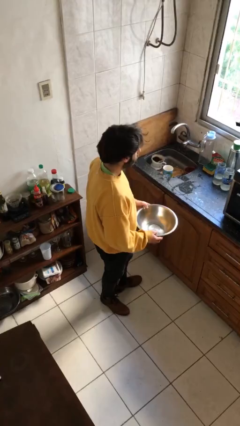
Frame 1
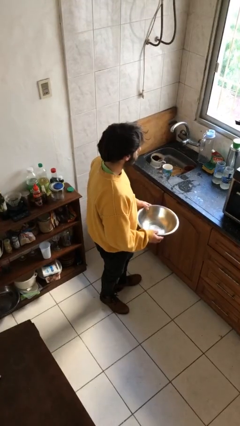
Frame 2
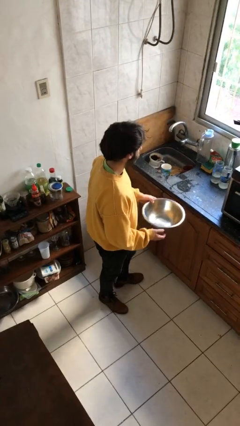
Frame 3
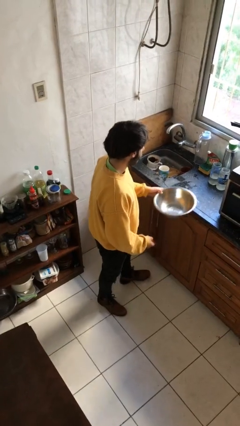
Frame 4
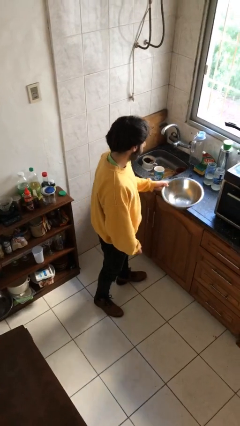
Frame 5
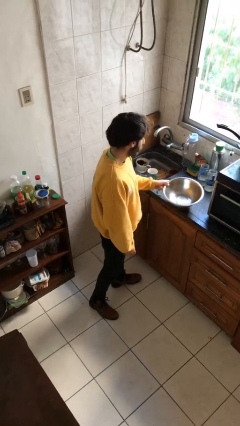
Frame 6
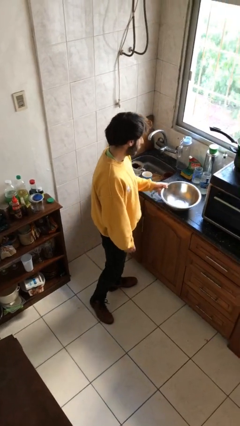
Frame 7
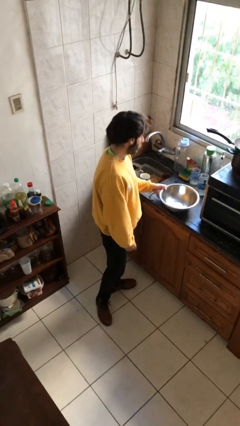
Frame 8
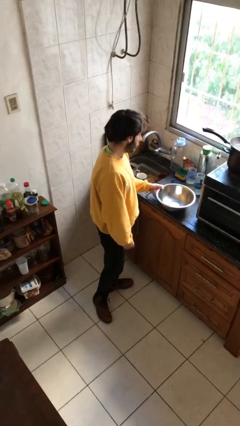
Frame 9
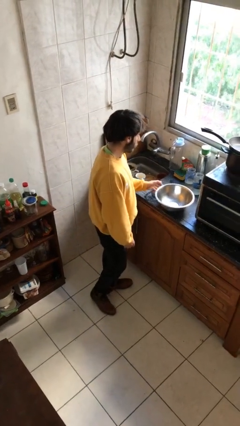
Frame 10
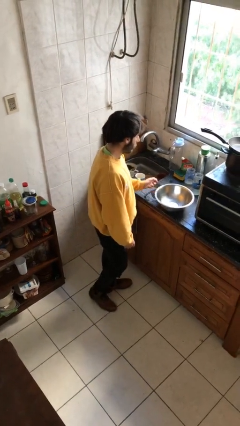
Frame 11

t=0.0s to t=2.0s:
person puts down object on countertop

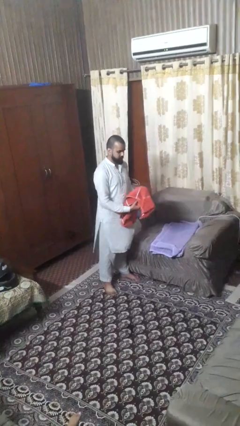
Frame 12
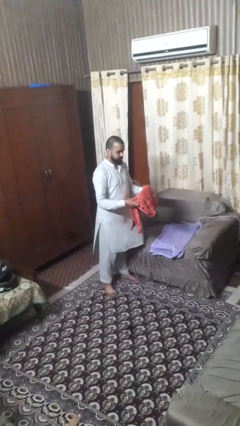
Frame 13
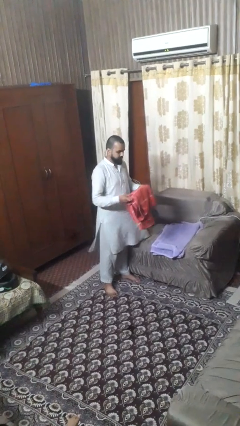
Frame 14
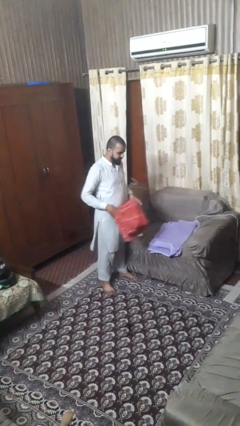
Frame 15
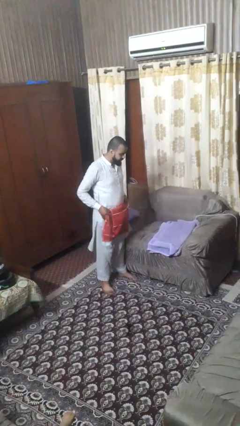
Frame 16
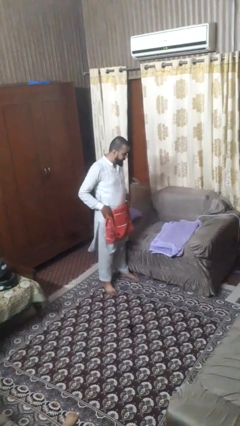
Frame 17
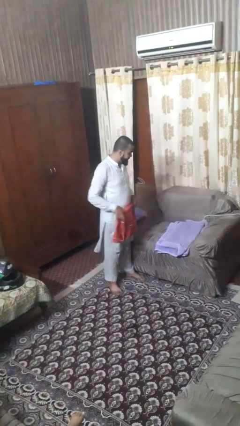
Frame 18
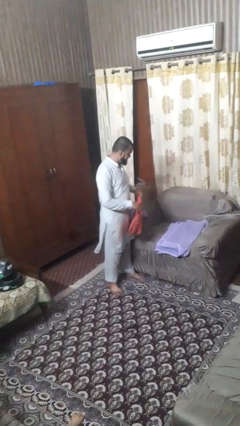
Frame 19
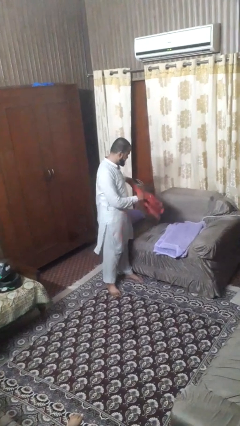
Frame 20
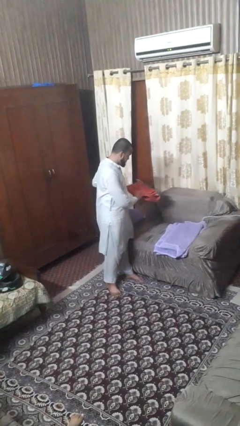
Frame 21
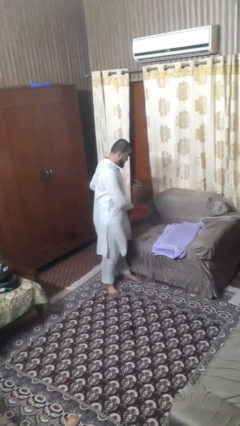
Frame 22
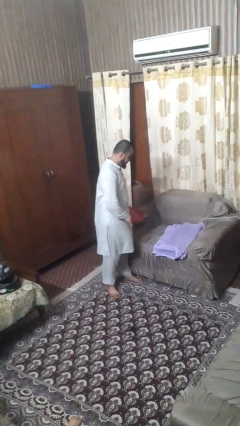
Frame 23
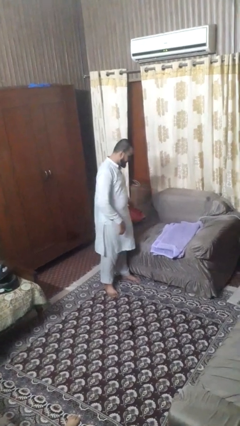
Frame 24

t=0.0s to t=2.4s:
person folds towel

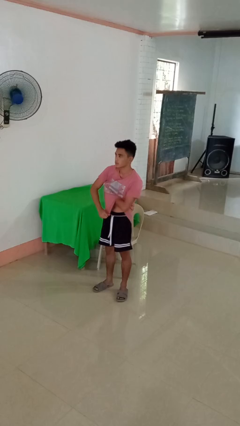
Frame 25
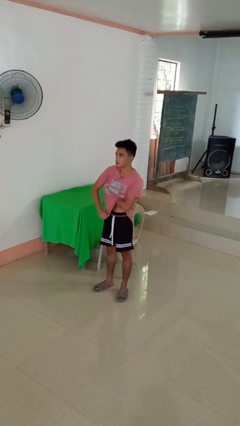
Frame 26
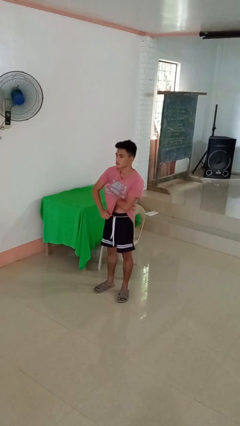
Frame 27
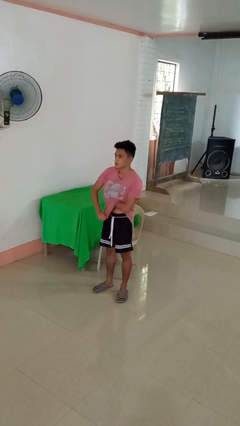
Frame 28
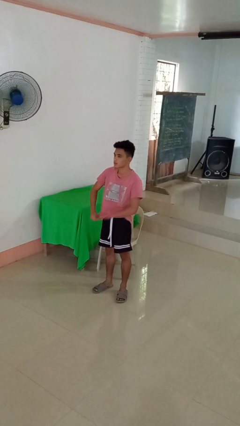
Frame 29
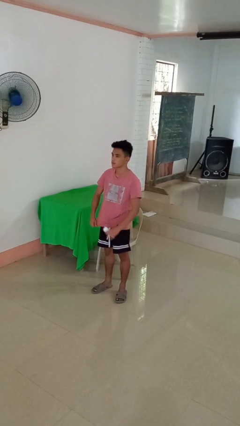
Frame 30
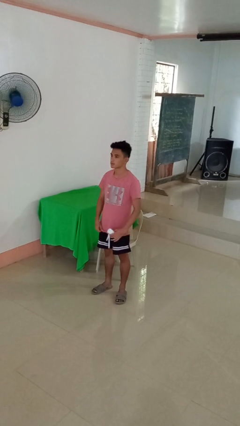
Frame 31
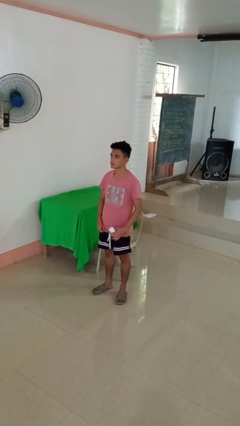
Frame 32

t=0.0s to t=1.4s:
person applies deodorant

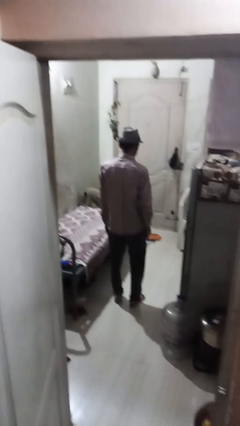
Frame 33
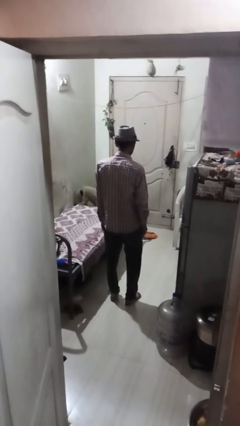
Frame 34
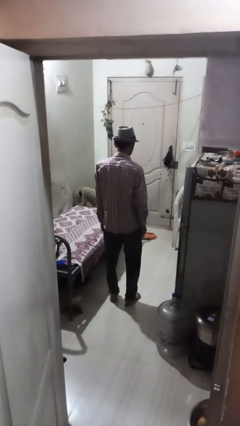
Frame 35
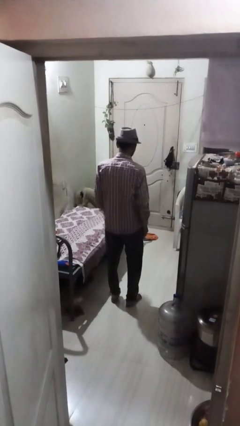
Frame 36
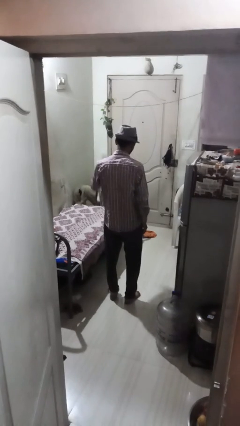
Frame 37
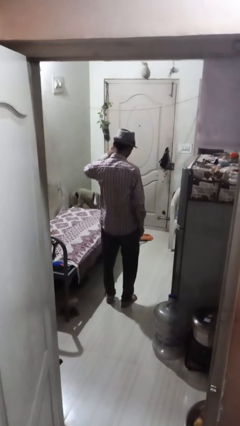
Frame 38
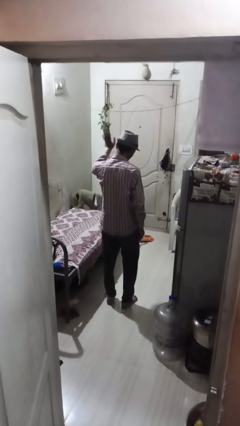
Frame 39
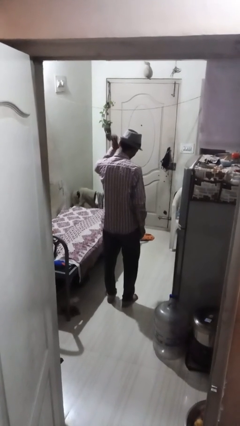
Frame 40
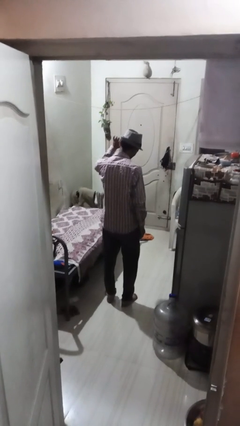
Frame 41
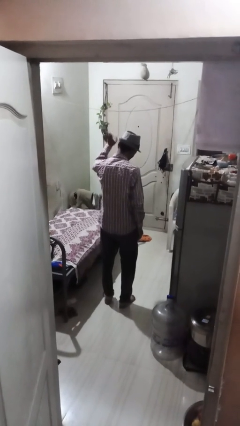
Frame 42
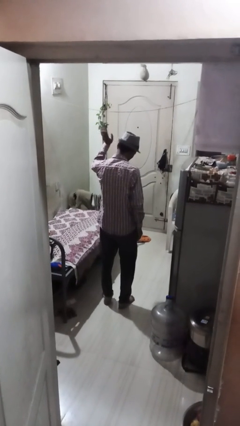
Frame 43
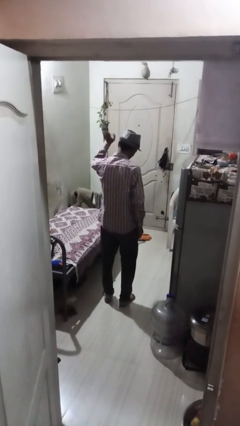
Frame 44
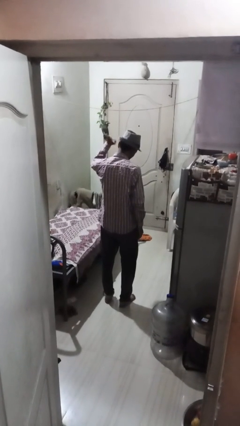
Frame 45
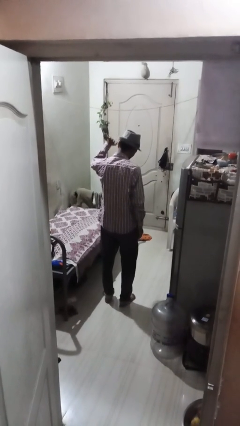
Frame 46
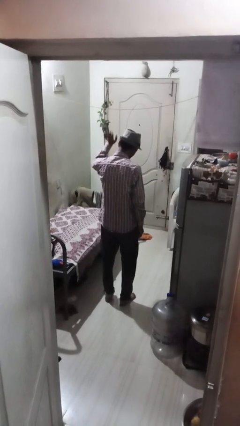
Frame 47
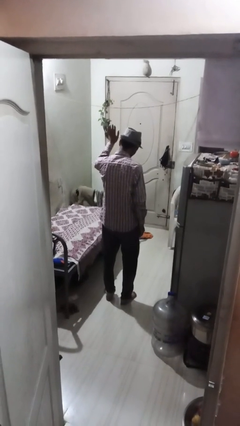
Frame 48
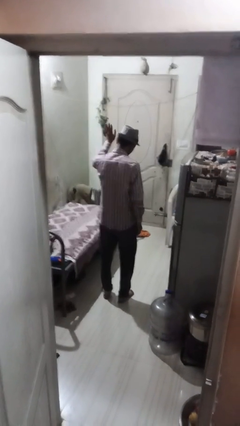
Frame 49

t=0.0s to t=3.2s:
person waves at person

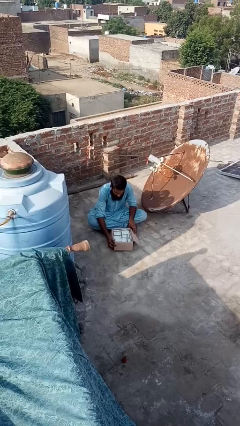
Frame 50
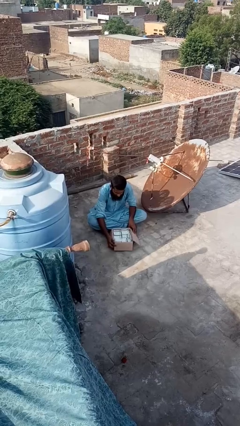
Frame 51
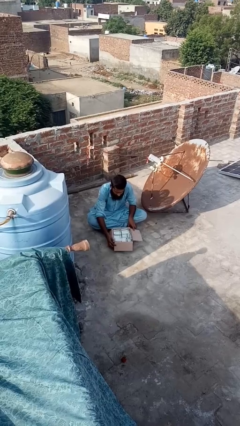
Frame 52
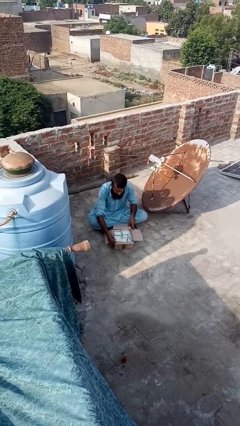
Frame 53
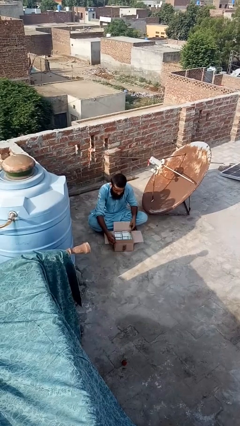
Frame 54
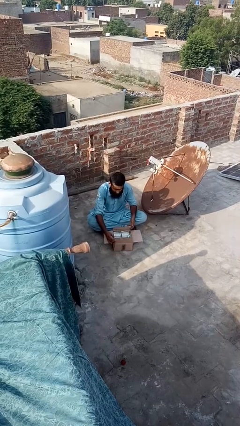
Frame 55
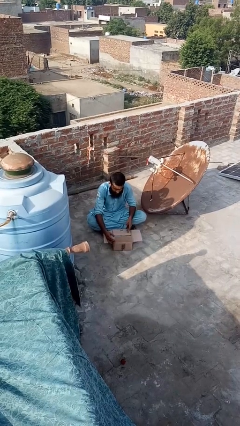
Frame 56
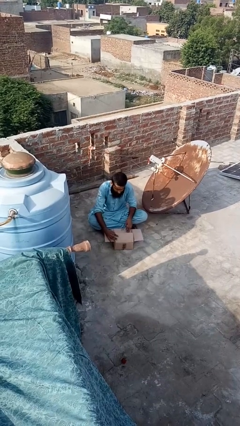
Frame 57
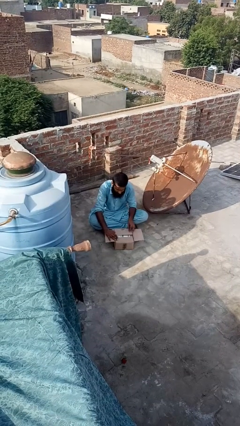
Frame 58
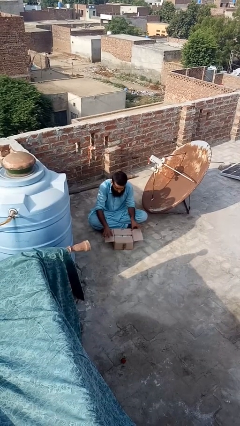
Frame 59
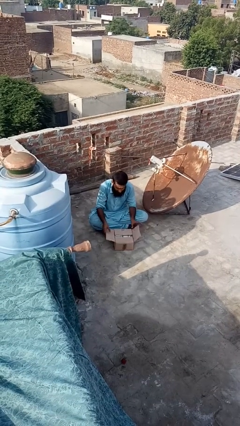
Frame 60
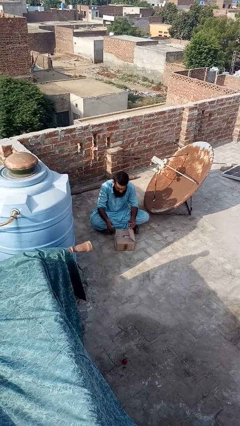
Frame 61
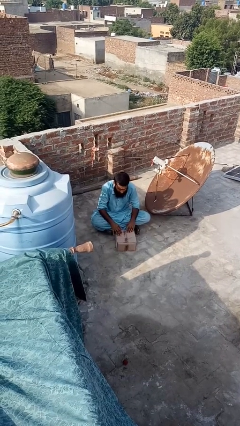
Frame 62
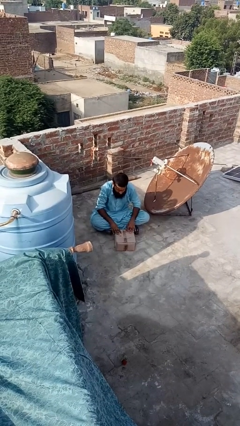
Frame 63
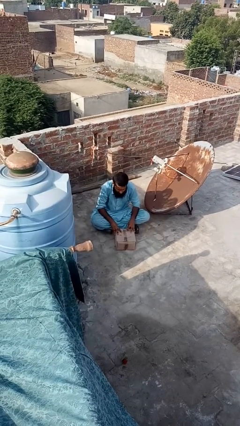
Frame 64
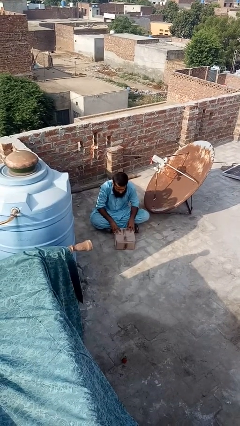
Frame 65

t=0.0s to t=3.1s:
person closes box

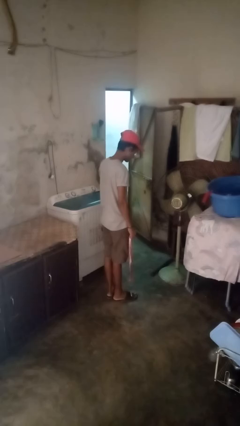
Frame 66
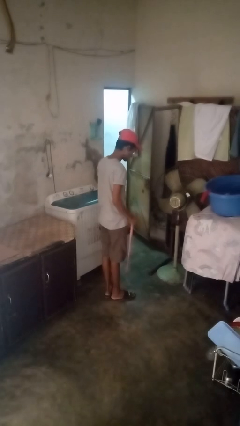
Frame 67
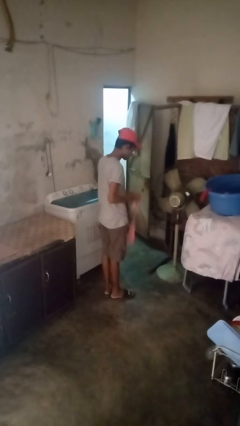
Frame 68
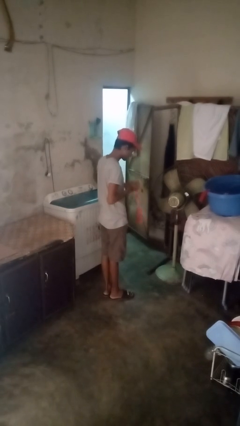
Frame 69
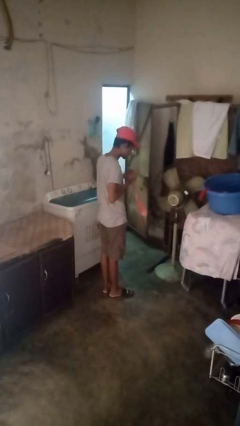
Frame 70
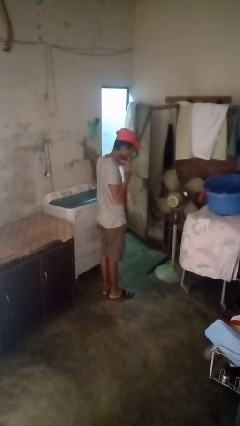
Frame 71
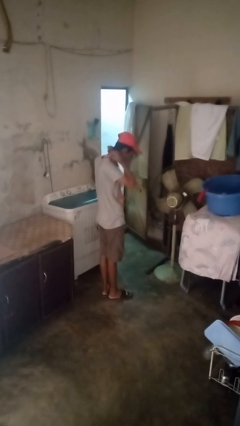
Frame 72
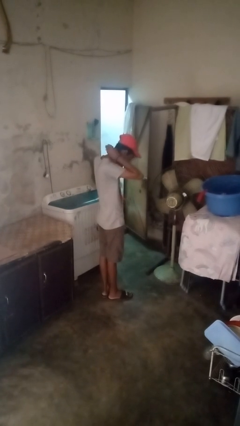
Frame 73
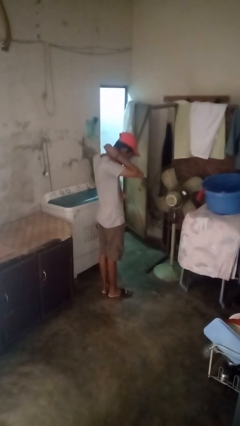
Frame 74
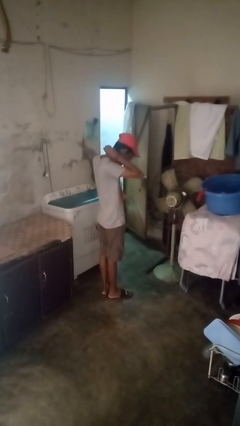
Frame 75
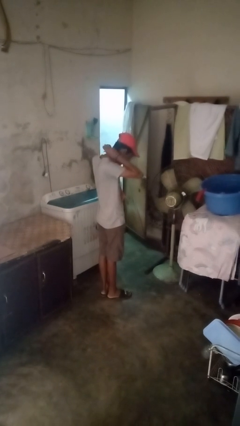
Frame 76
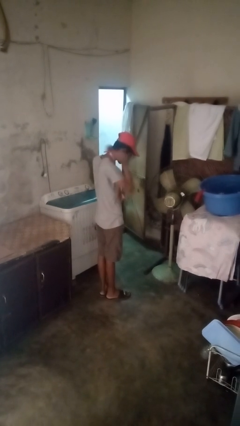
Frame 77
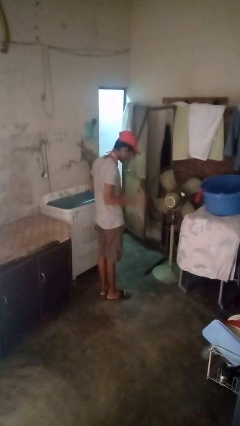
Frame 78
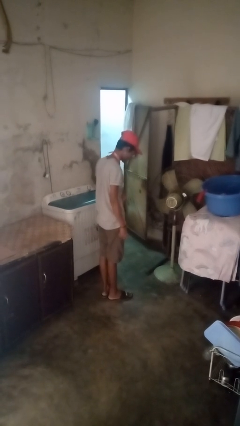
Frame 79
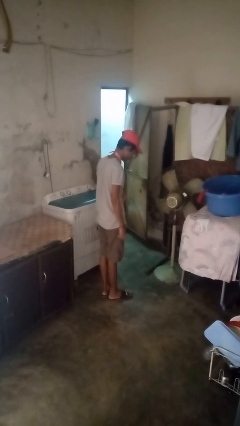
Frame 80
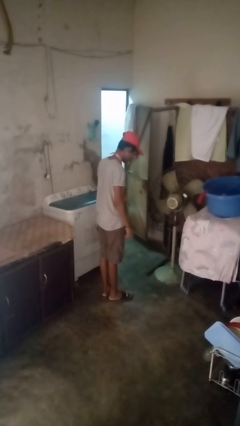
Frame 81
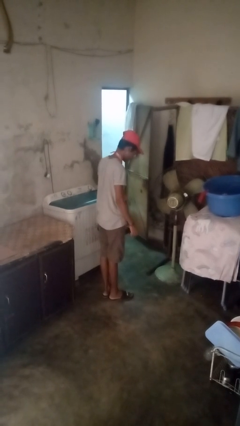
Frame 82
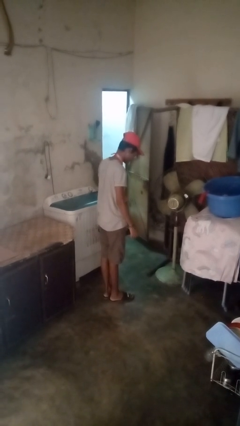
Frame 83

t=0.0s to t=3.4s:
person puts on necktie

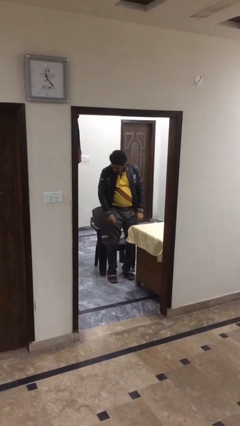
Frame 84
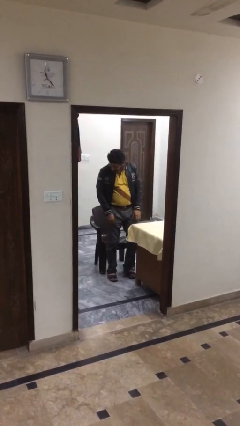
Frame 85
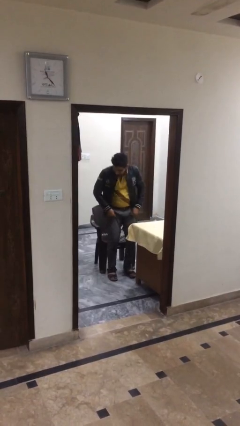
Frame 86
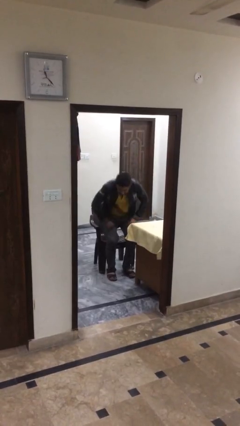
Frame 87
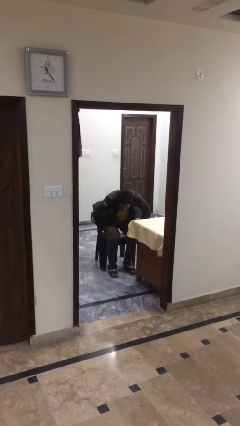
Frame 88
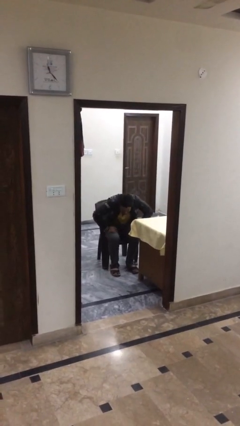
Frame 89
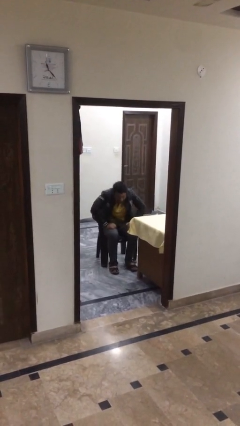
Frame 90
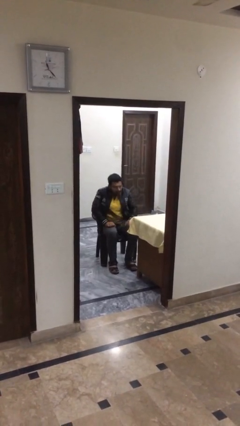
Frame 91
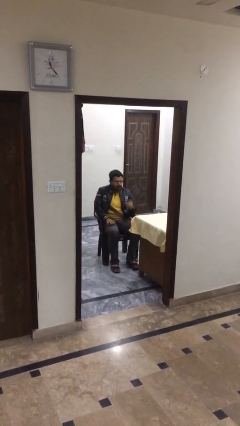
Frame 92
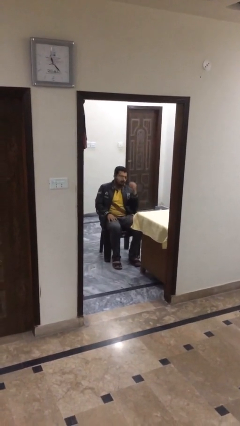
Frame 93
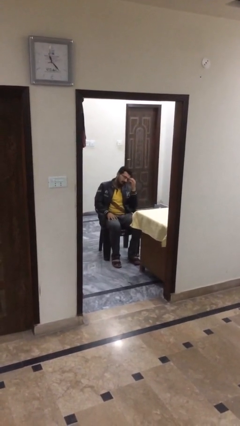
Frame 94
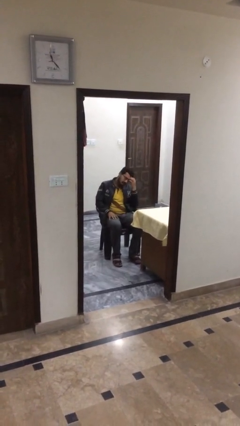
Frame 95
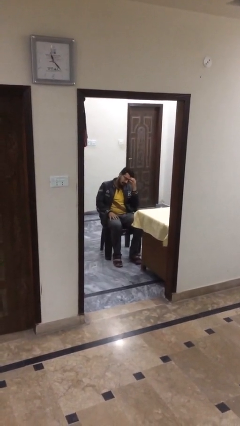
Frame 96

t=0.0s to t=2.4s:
person sits down
